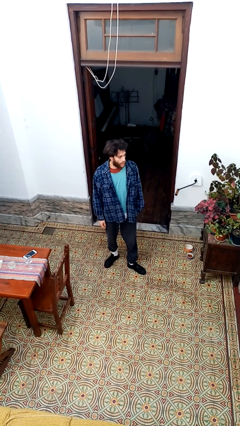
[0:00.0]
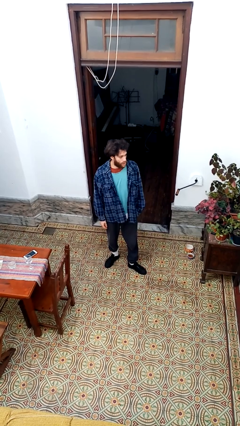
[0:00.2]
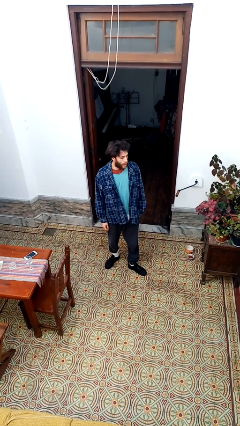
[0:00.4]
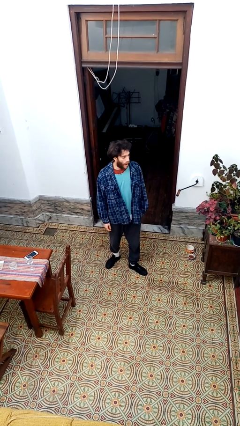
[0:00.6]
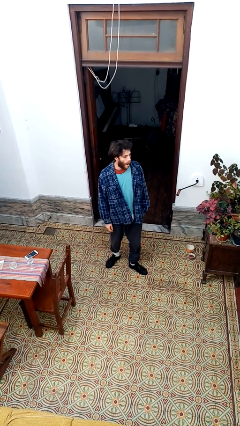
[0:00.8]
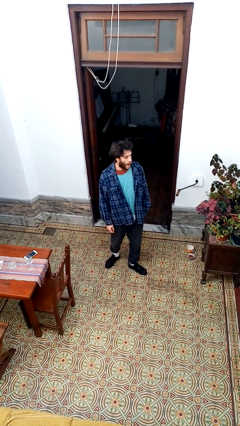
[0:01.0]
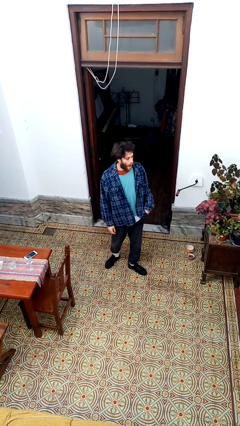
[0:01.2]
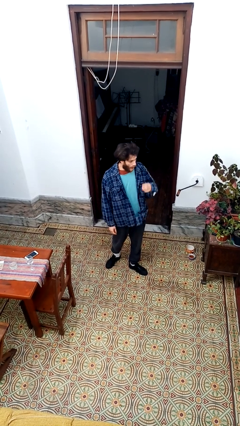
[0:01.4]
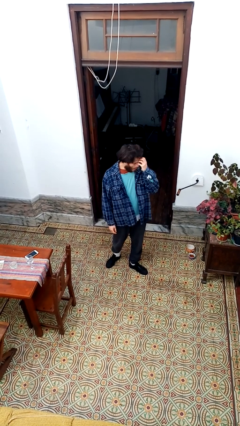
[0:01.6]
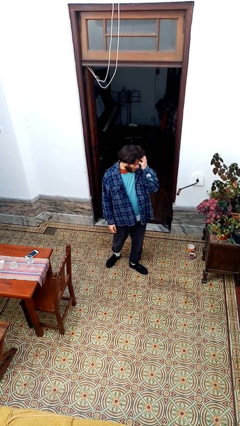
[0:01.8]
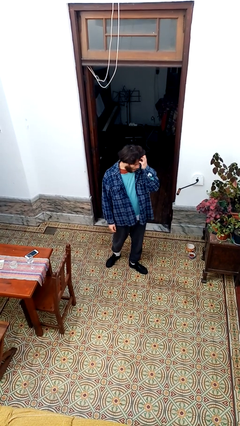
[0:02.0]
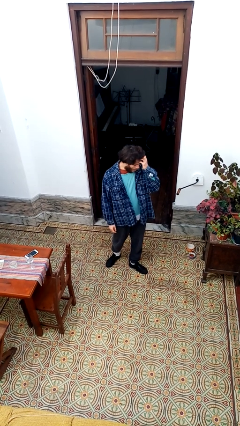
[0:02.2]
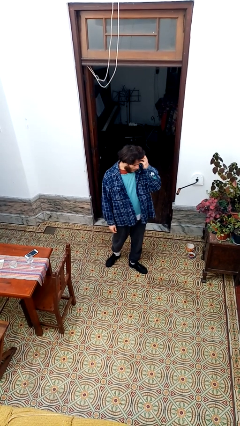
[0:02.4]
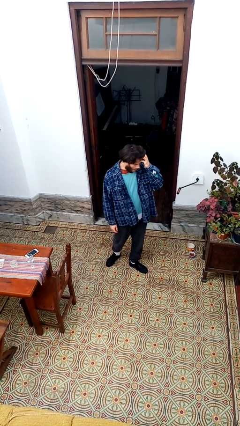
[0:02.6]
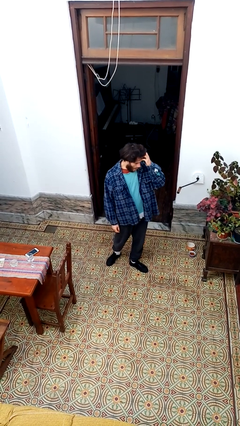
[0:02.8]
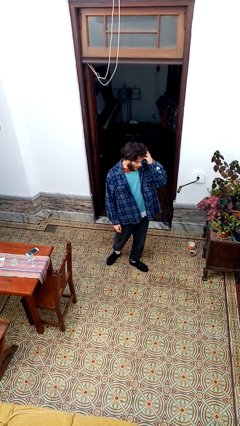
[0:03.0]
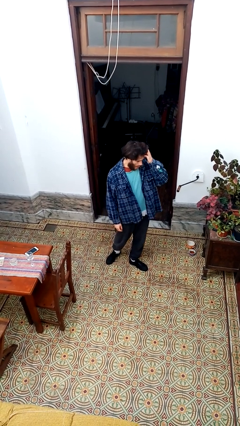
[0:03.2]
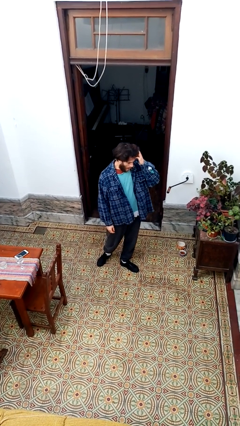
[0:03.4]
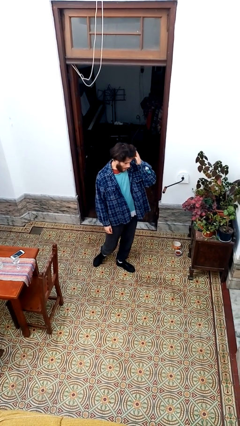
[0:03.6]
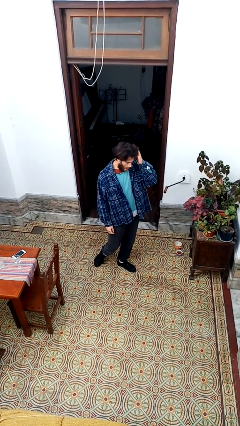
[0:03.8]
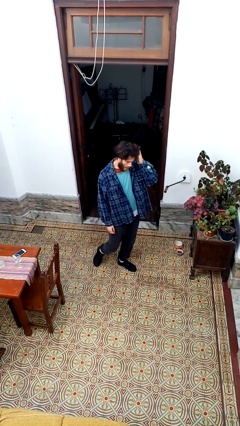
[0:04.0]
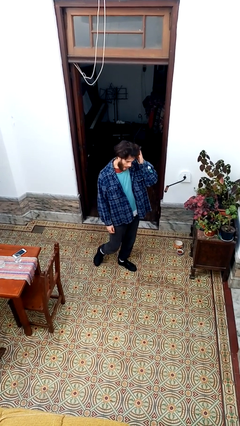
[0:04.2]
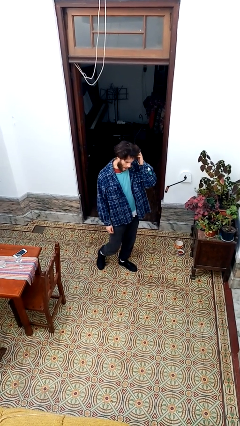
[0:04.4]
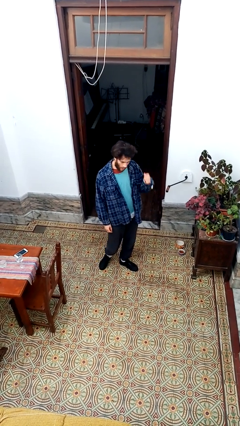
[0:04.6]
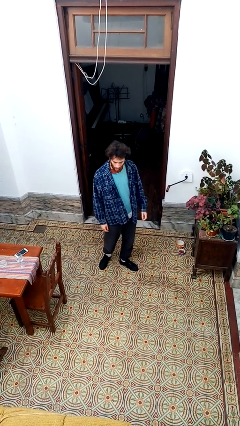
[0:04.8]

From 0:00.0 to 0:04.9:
person scratches face

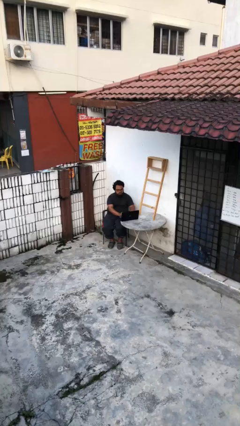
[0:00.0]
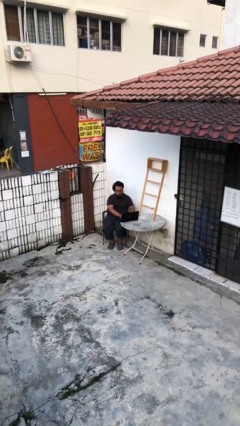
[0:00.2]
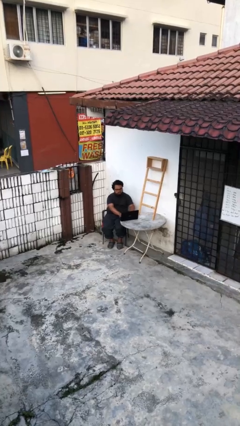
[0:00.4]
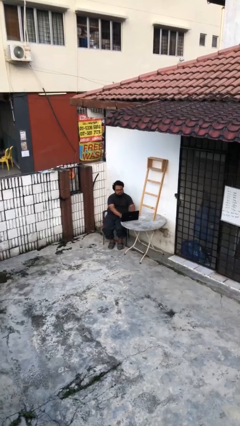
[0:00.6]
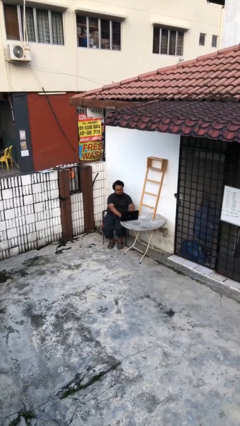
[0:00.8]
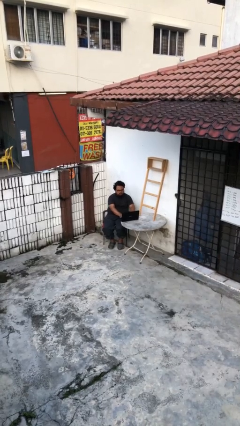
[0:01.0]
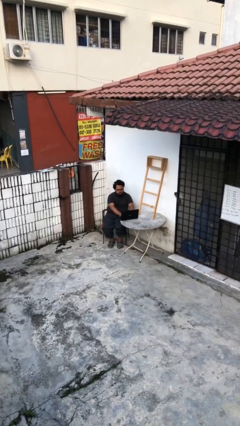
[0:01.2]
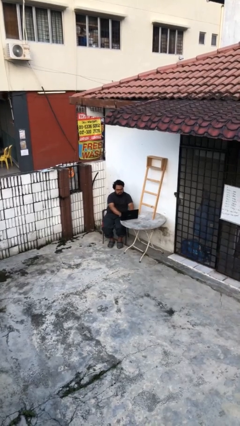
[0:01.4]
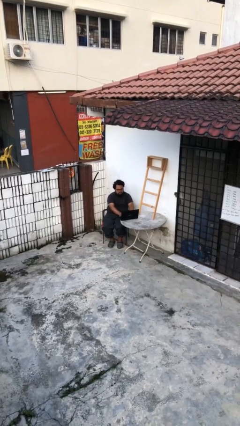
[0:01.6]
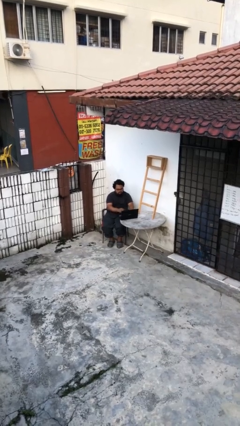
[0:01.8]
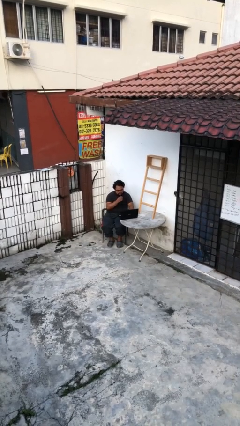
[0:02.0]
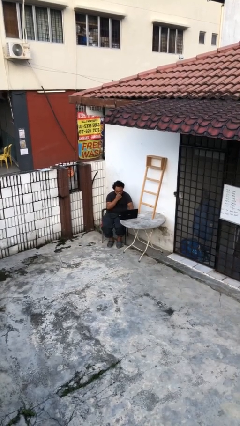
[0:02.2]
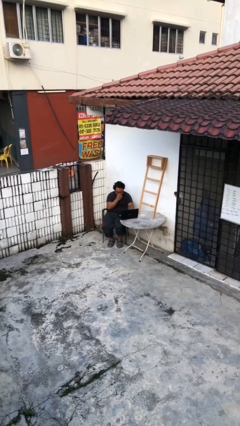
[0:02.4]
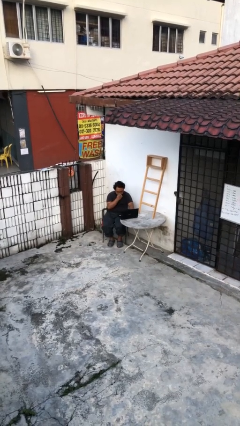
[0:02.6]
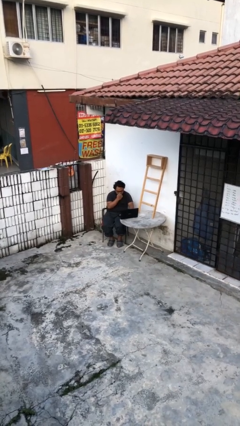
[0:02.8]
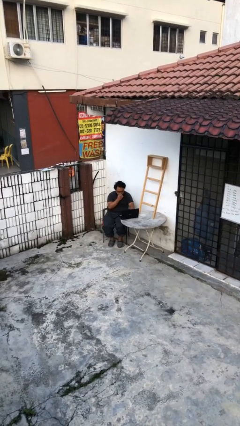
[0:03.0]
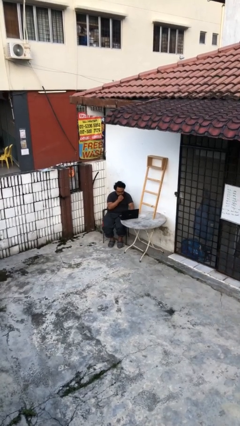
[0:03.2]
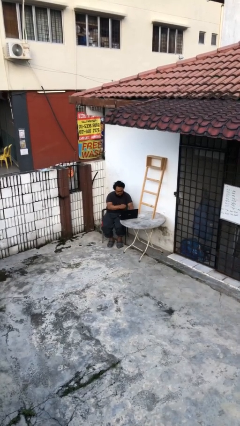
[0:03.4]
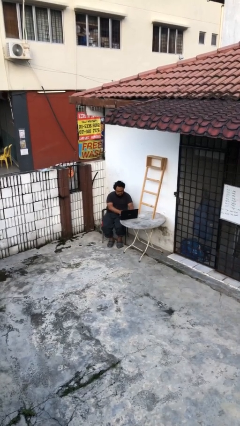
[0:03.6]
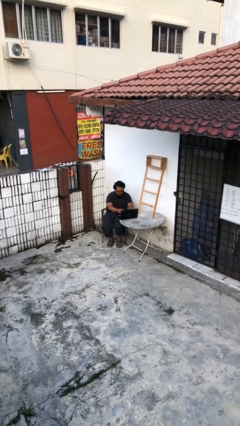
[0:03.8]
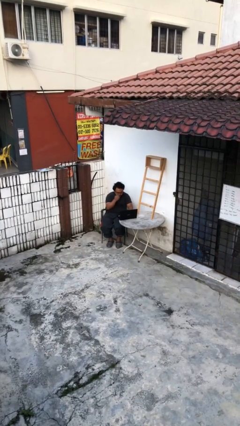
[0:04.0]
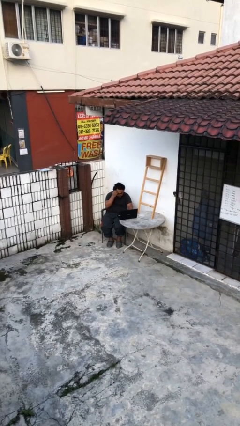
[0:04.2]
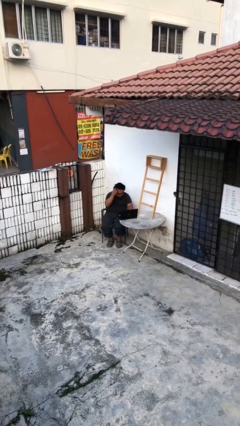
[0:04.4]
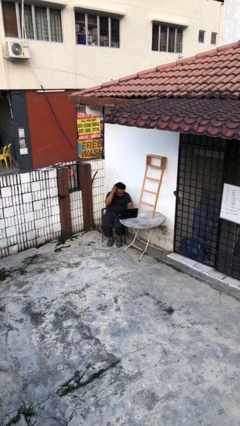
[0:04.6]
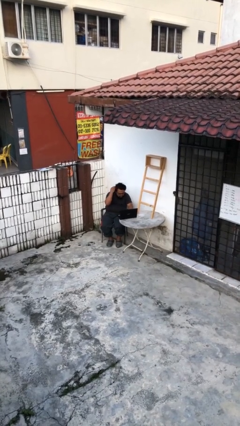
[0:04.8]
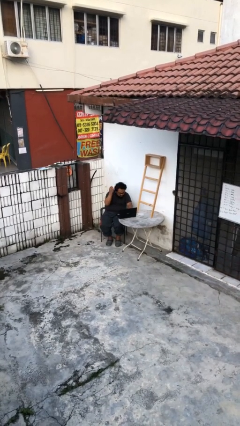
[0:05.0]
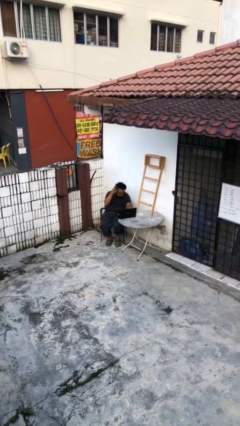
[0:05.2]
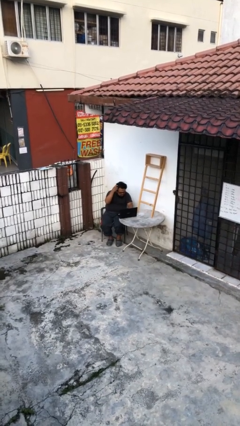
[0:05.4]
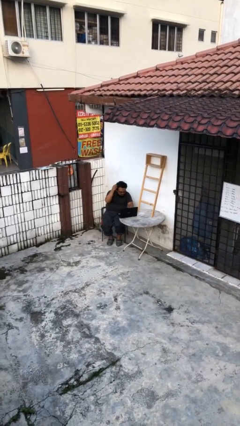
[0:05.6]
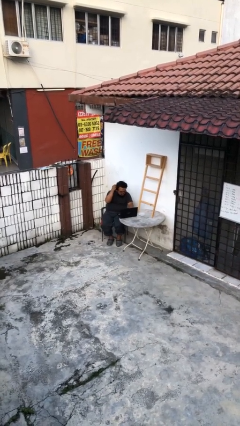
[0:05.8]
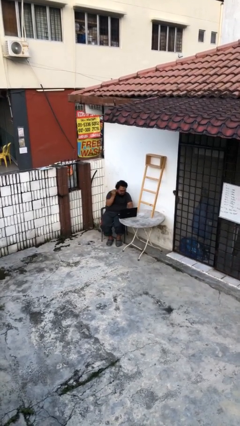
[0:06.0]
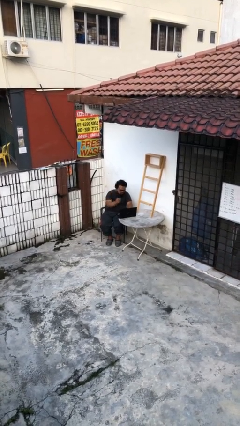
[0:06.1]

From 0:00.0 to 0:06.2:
person interacts with laptop

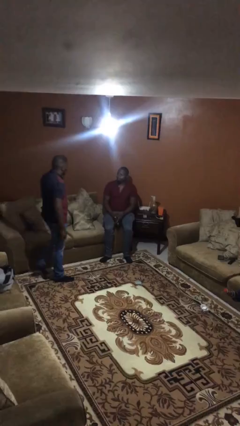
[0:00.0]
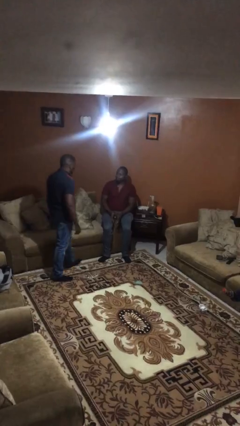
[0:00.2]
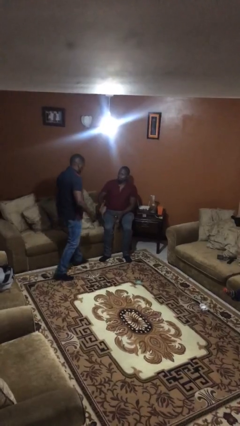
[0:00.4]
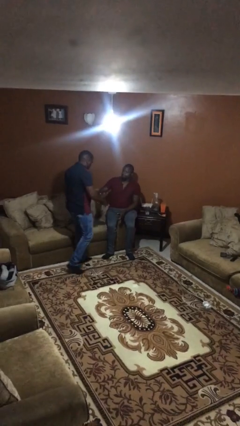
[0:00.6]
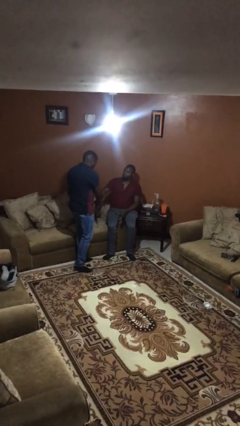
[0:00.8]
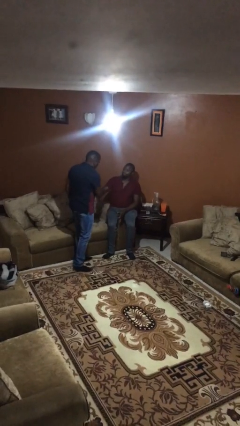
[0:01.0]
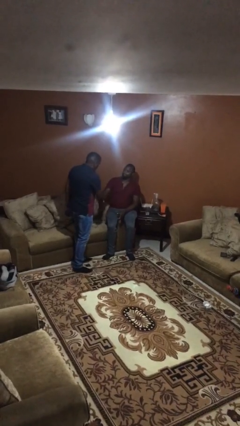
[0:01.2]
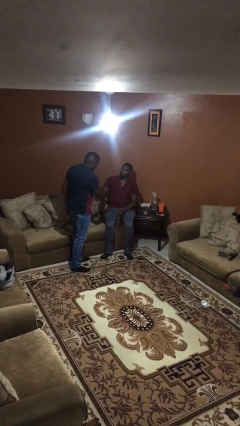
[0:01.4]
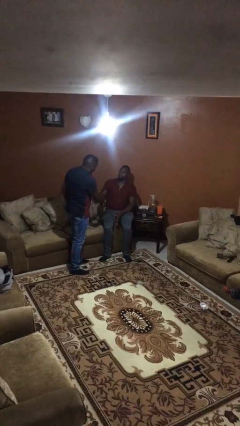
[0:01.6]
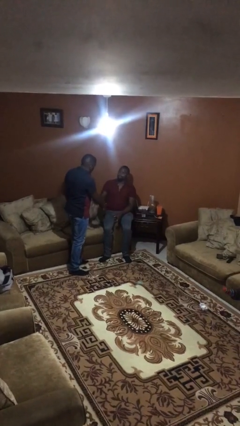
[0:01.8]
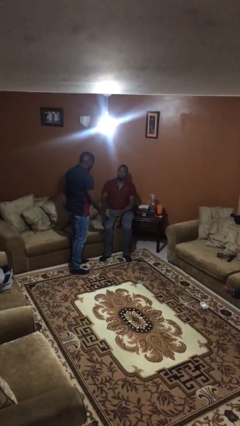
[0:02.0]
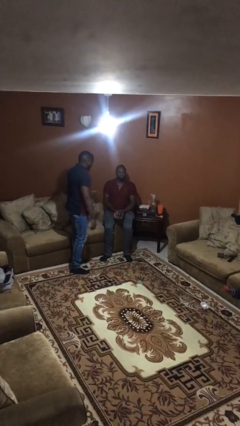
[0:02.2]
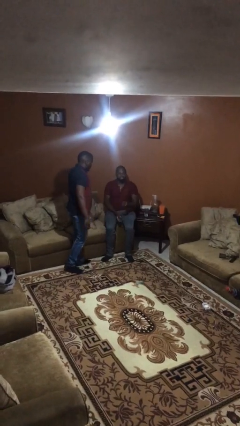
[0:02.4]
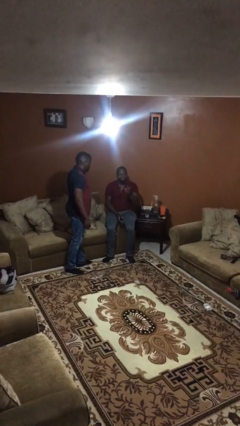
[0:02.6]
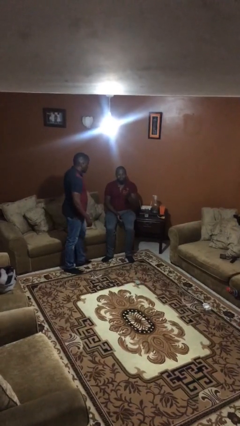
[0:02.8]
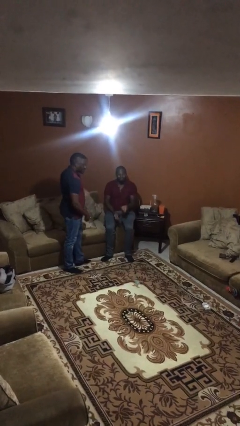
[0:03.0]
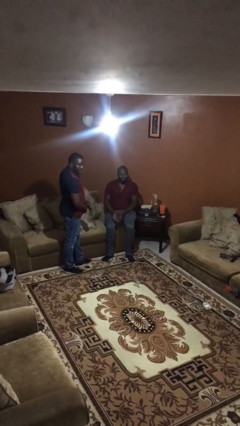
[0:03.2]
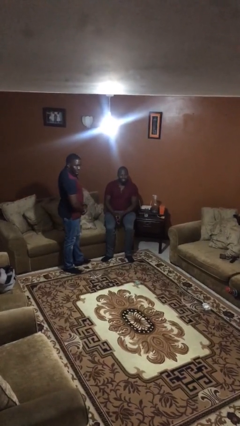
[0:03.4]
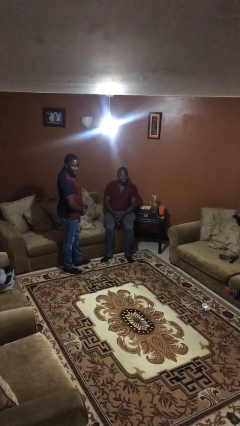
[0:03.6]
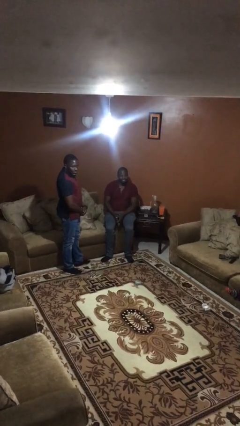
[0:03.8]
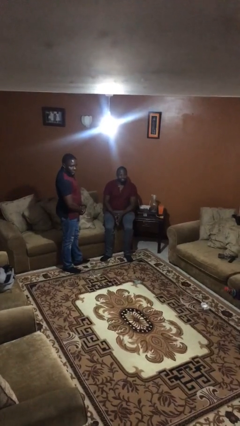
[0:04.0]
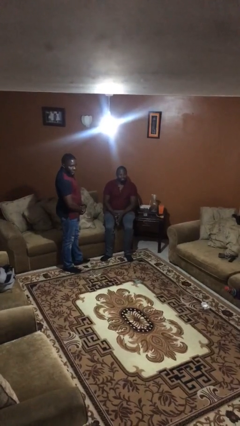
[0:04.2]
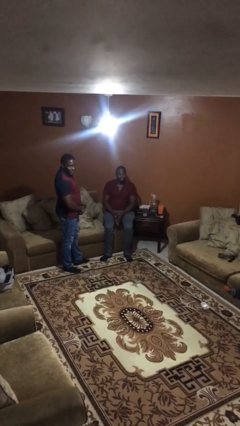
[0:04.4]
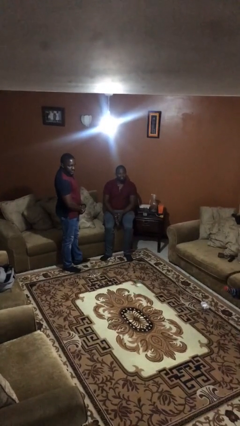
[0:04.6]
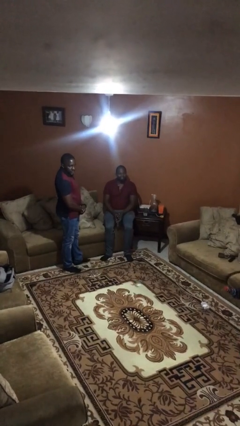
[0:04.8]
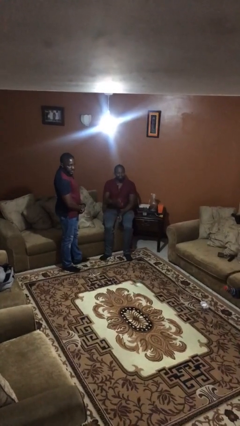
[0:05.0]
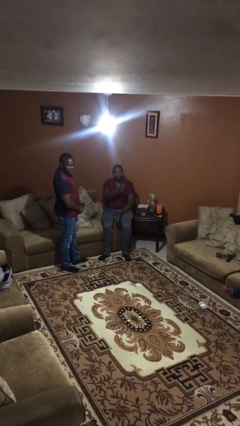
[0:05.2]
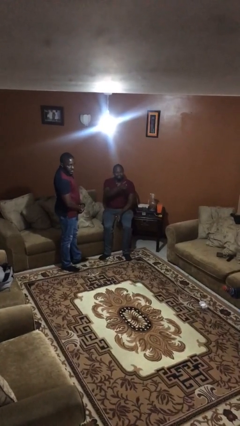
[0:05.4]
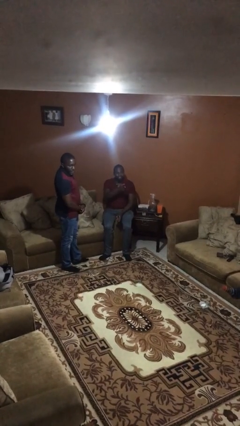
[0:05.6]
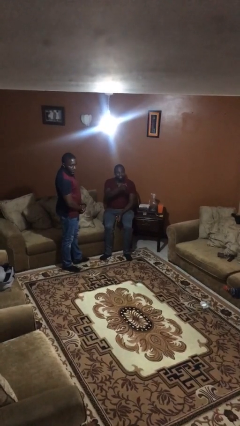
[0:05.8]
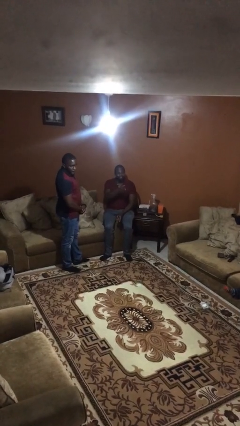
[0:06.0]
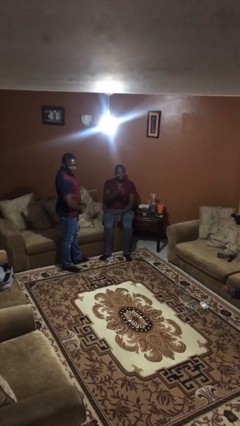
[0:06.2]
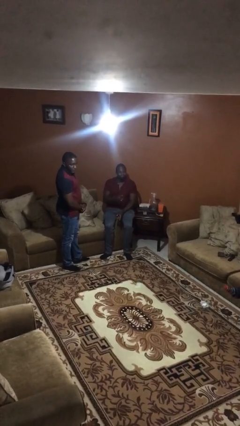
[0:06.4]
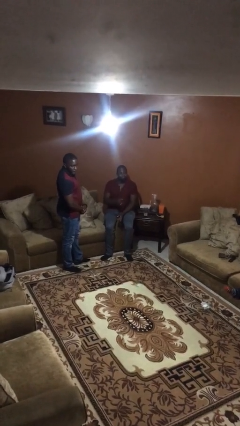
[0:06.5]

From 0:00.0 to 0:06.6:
person shakes hand

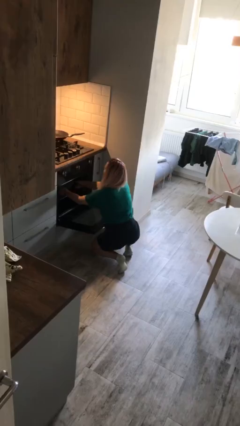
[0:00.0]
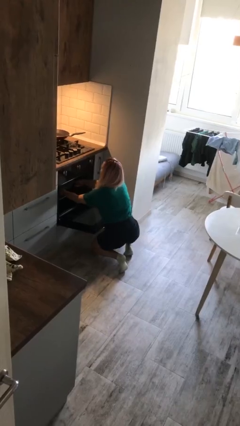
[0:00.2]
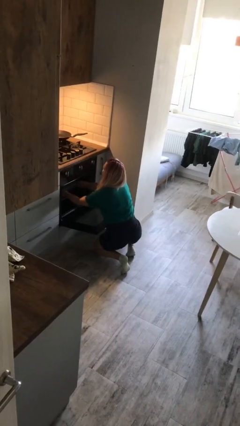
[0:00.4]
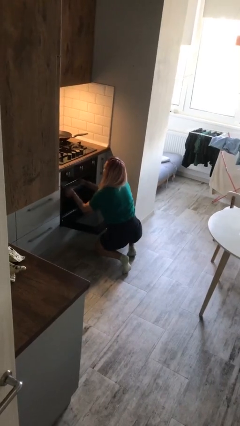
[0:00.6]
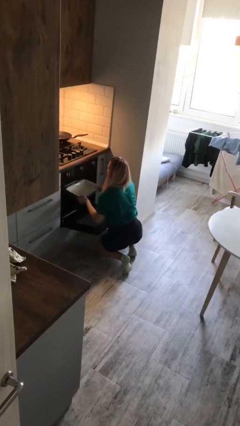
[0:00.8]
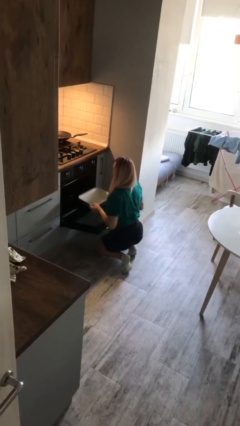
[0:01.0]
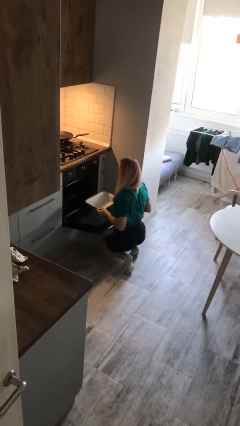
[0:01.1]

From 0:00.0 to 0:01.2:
person takes object from oven
